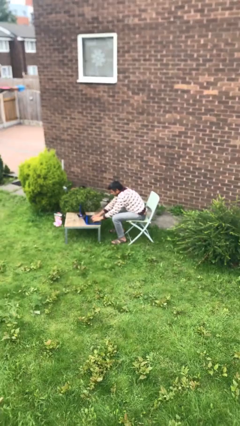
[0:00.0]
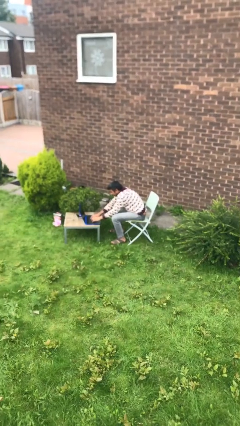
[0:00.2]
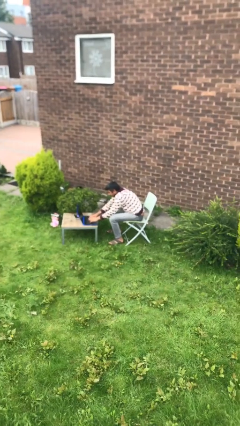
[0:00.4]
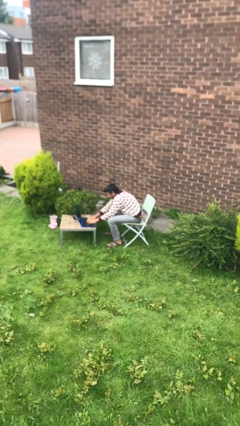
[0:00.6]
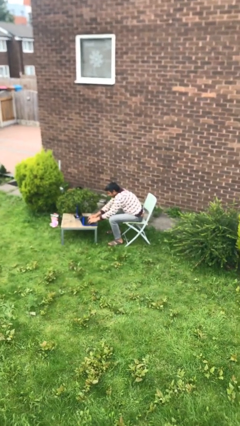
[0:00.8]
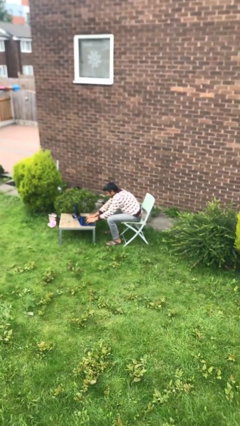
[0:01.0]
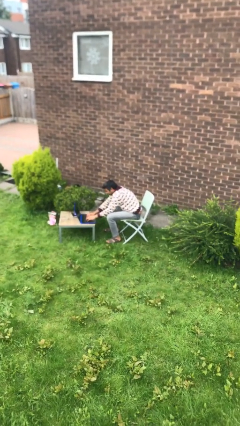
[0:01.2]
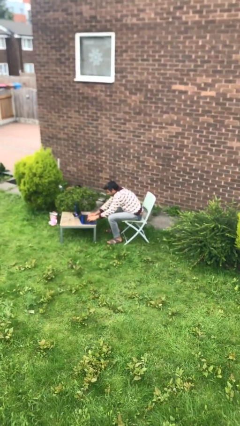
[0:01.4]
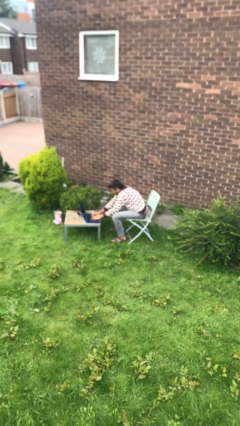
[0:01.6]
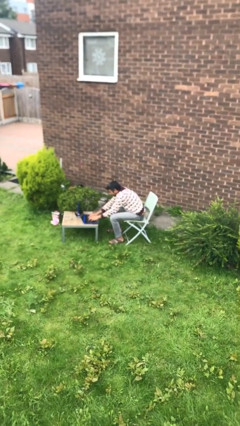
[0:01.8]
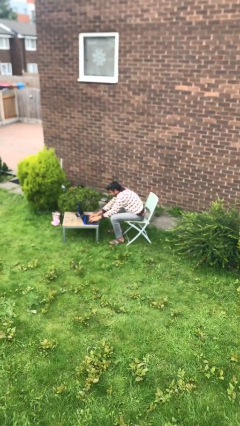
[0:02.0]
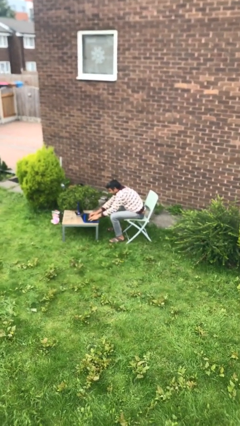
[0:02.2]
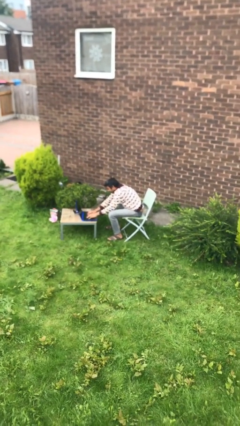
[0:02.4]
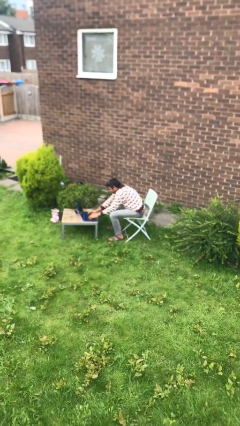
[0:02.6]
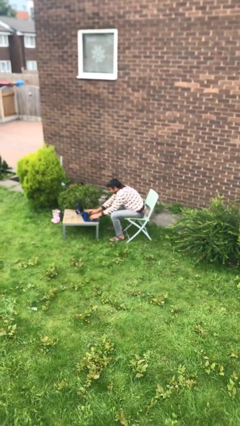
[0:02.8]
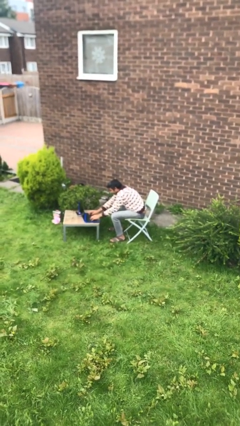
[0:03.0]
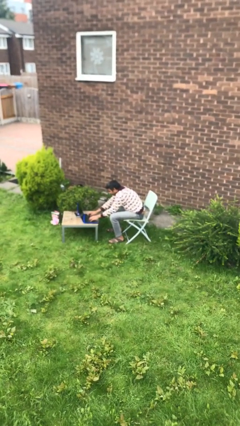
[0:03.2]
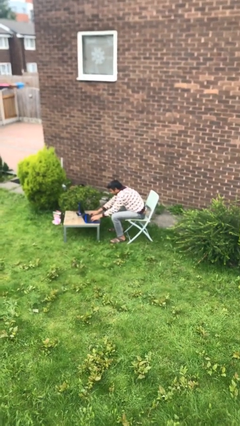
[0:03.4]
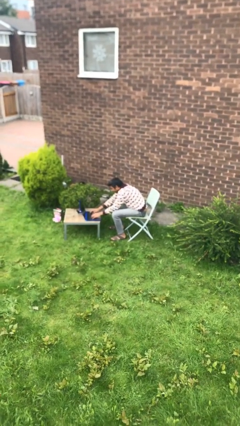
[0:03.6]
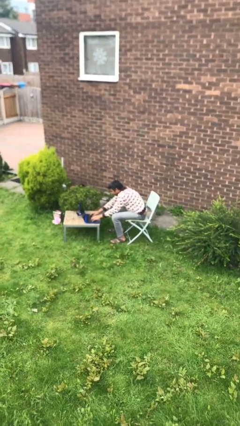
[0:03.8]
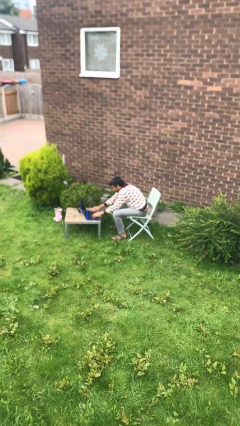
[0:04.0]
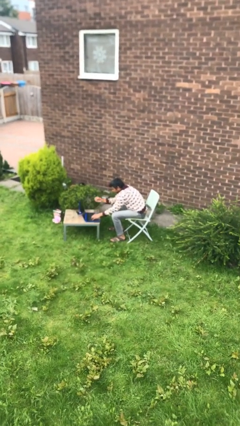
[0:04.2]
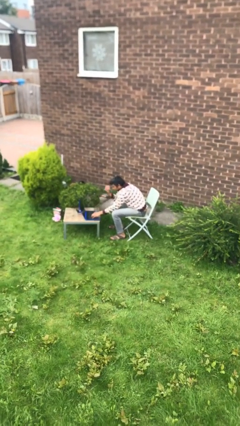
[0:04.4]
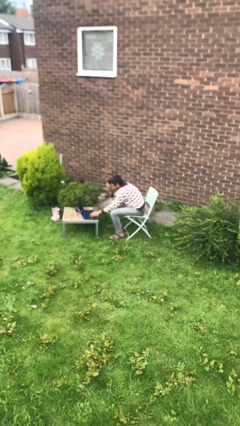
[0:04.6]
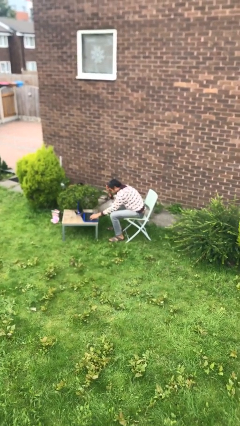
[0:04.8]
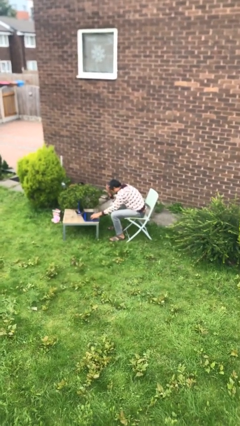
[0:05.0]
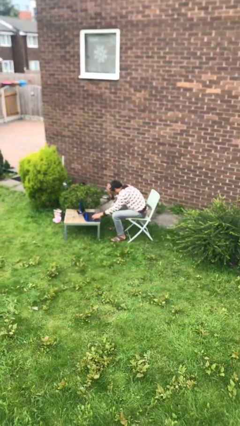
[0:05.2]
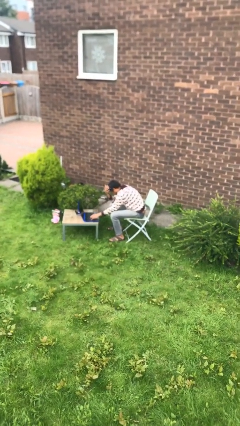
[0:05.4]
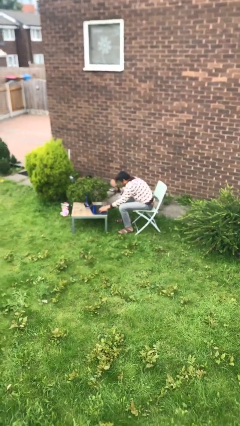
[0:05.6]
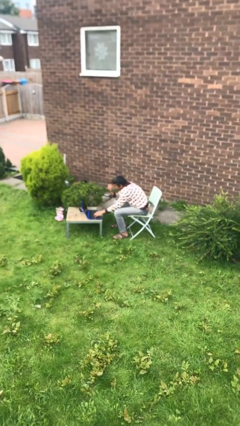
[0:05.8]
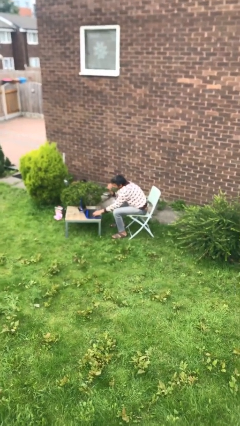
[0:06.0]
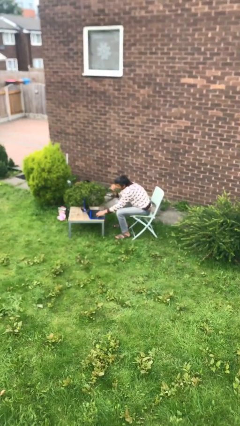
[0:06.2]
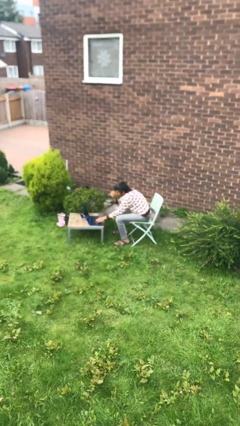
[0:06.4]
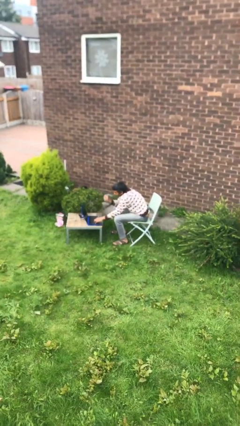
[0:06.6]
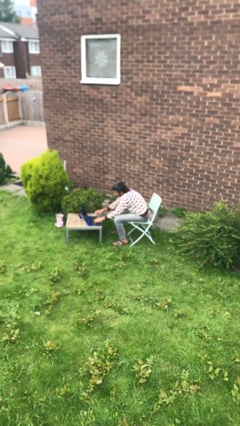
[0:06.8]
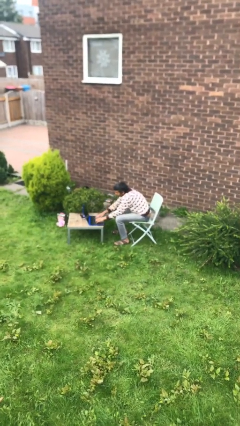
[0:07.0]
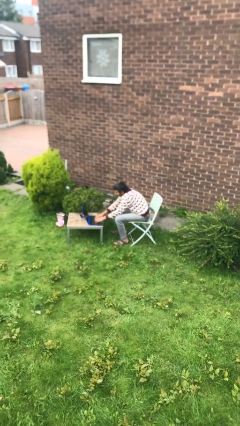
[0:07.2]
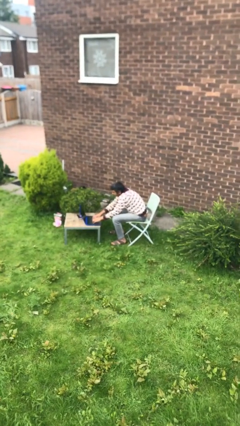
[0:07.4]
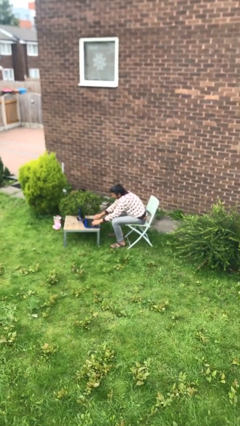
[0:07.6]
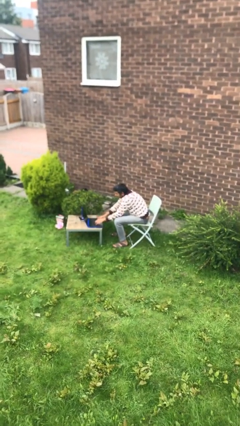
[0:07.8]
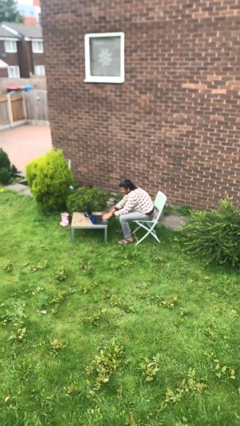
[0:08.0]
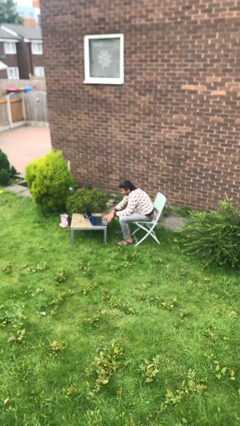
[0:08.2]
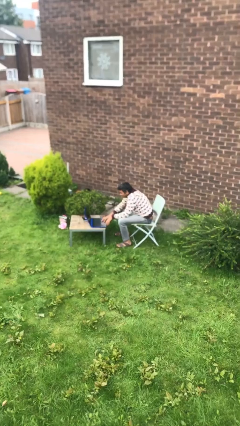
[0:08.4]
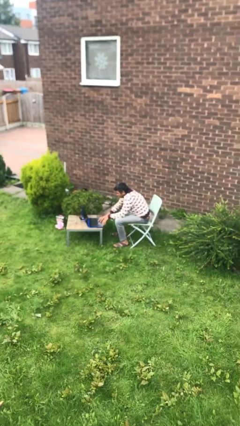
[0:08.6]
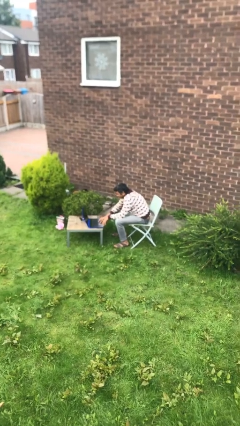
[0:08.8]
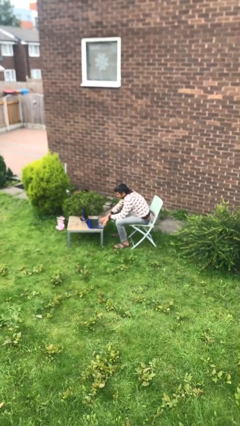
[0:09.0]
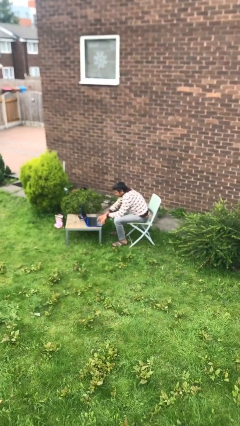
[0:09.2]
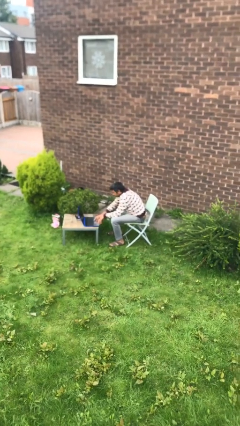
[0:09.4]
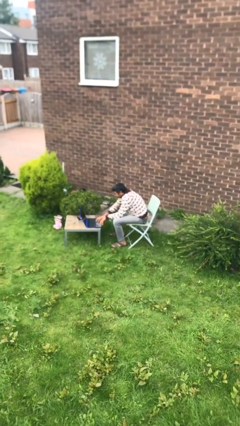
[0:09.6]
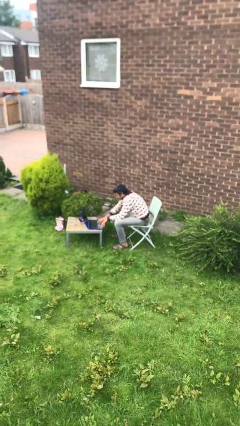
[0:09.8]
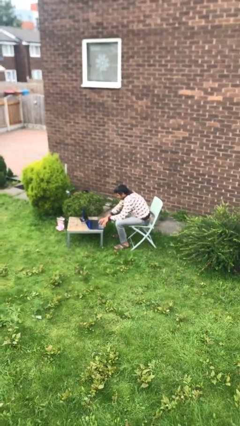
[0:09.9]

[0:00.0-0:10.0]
person interacts with laptop

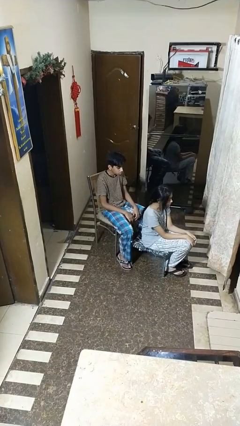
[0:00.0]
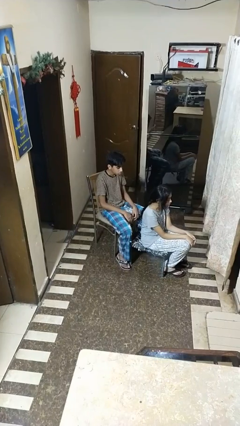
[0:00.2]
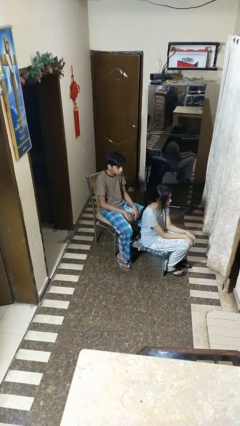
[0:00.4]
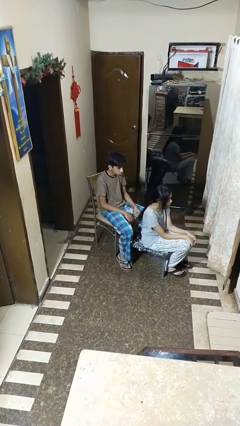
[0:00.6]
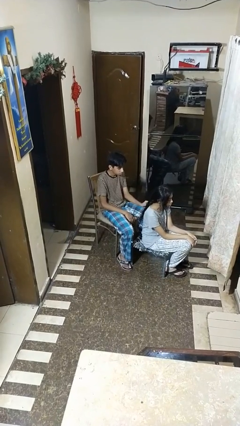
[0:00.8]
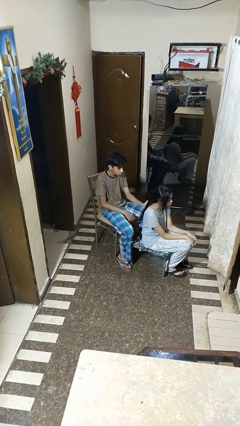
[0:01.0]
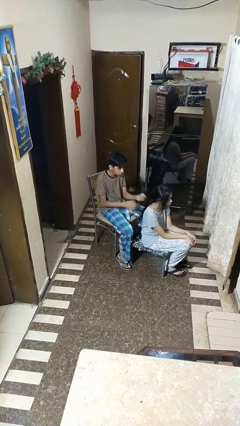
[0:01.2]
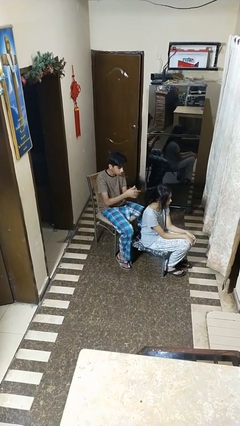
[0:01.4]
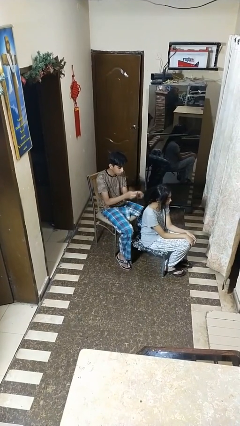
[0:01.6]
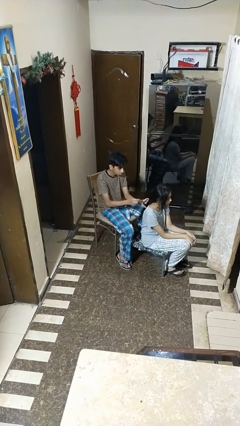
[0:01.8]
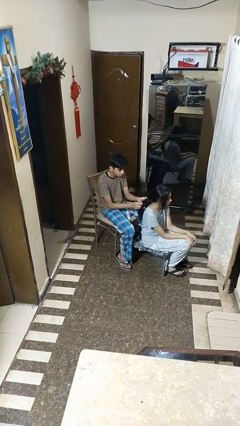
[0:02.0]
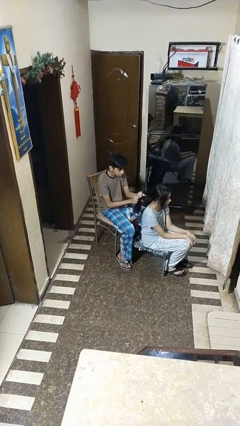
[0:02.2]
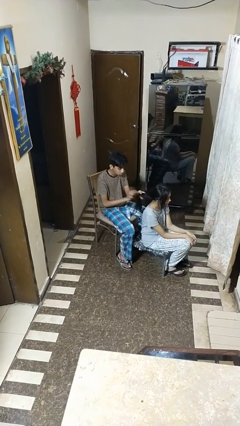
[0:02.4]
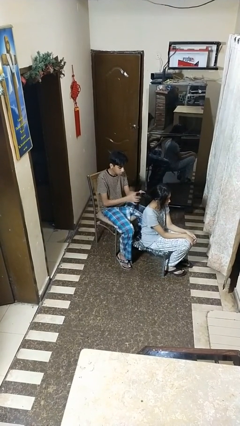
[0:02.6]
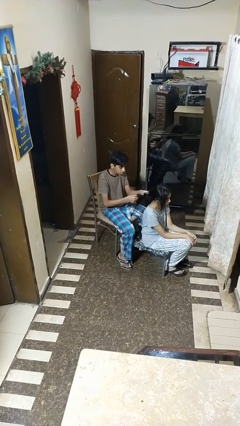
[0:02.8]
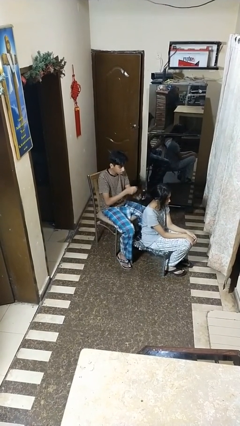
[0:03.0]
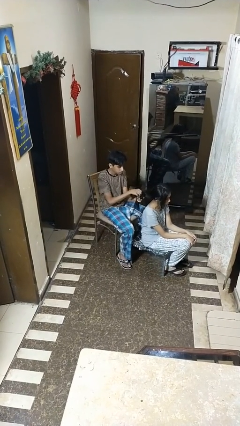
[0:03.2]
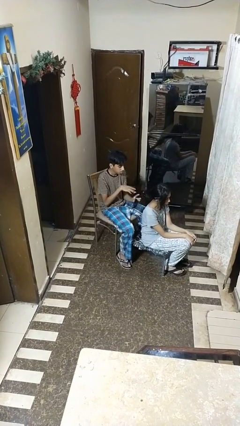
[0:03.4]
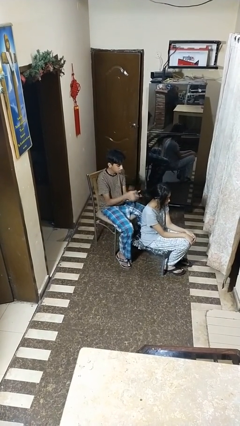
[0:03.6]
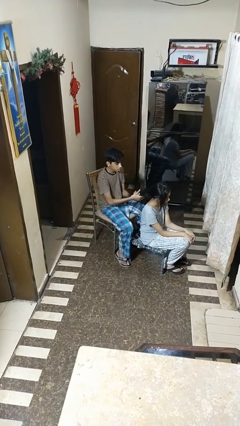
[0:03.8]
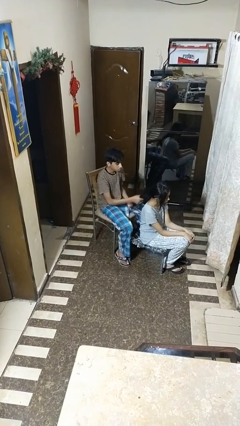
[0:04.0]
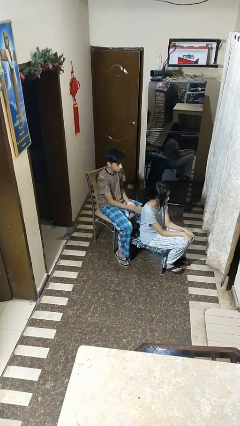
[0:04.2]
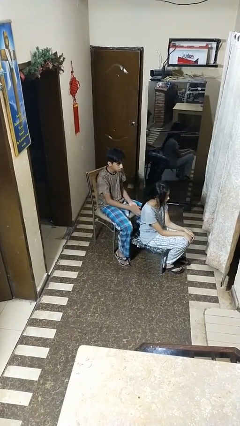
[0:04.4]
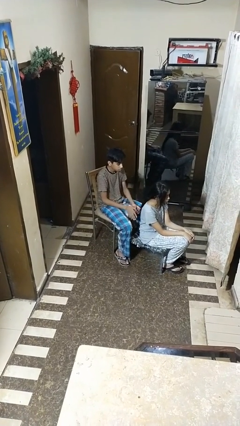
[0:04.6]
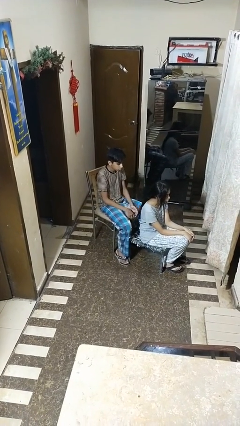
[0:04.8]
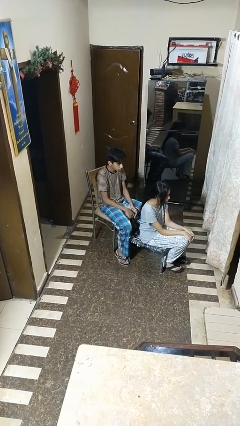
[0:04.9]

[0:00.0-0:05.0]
person braids hair of person

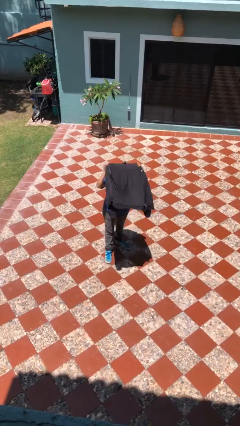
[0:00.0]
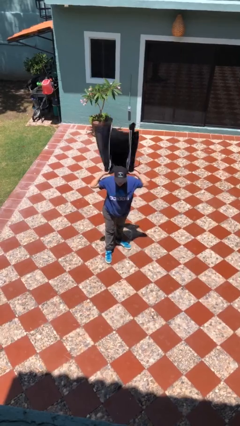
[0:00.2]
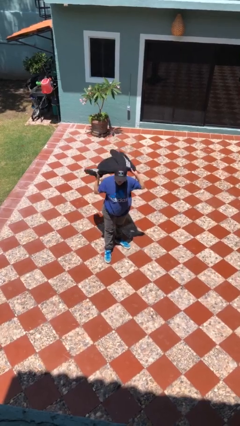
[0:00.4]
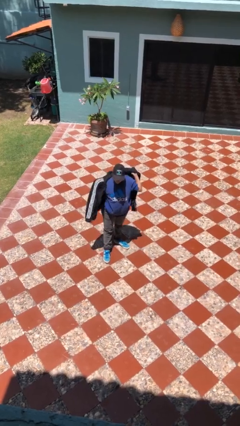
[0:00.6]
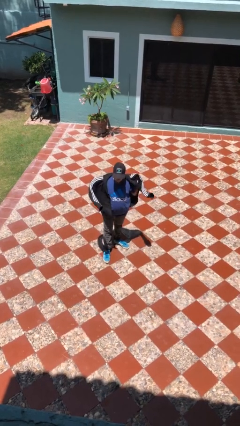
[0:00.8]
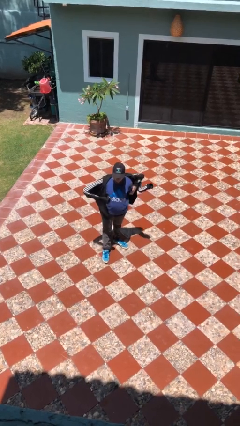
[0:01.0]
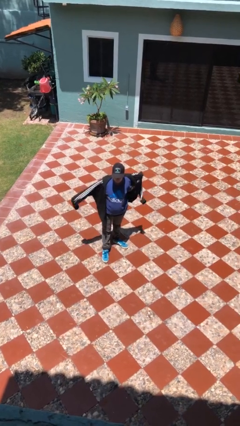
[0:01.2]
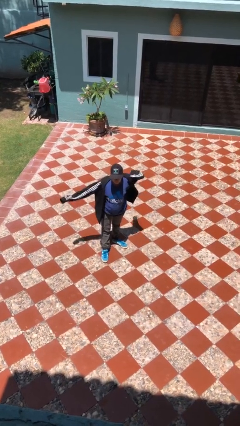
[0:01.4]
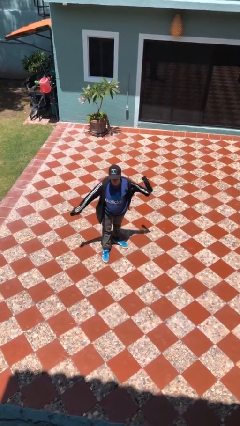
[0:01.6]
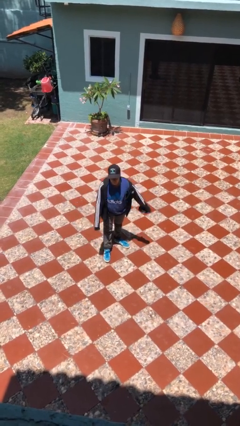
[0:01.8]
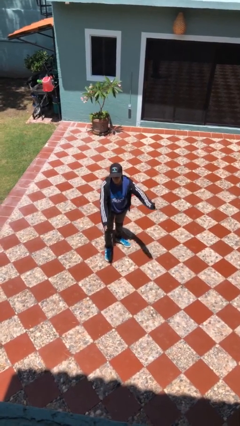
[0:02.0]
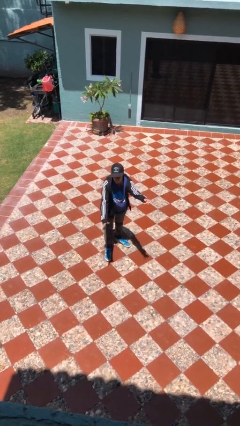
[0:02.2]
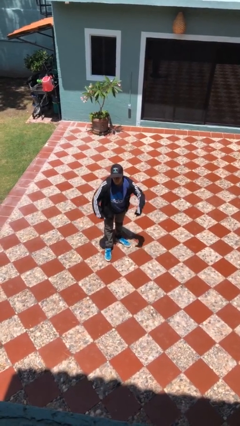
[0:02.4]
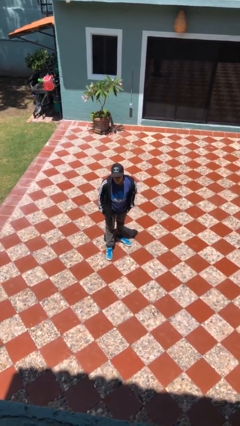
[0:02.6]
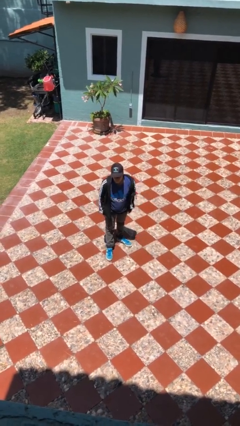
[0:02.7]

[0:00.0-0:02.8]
person puts on jacket
